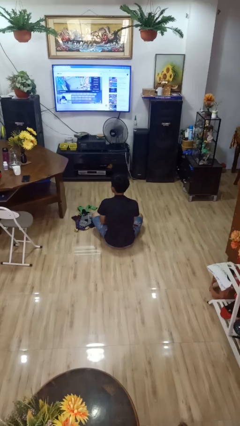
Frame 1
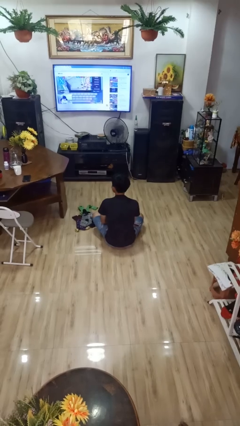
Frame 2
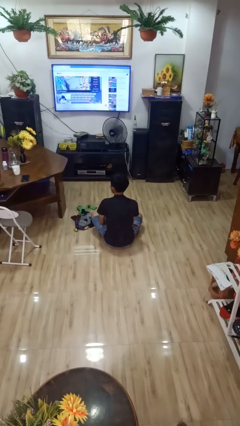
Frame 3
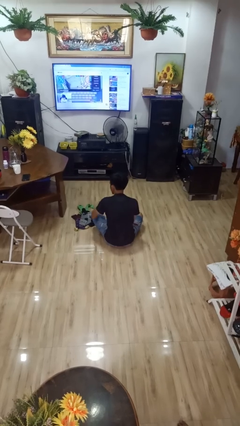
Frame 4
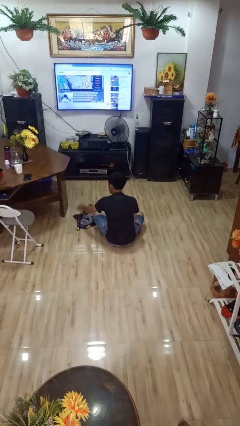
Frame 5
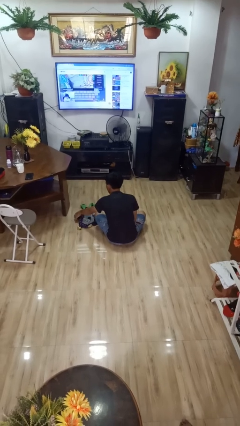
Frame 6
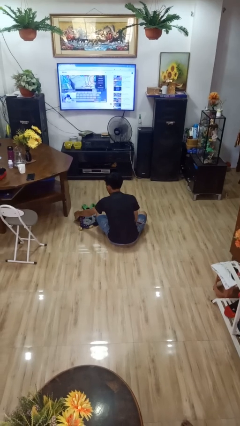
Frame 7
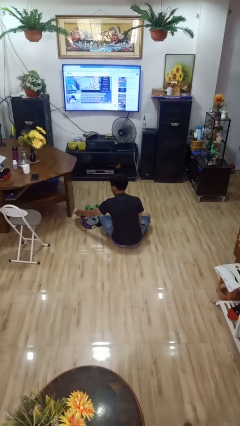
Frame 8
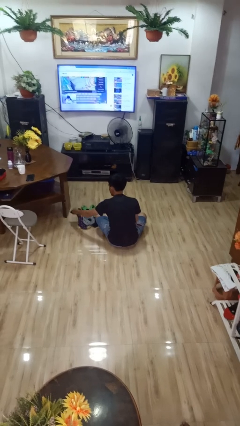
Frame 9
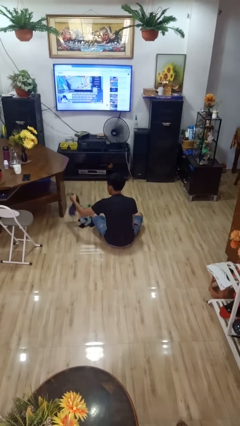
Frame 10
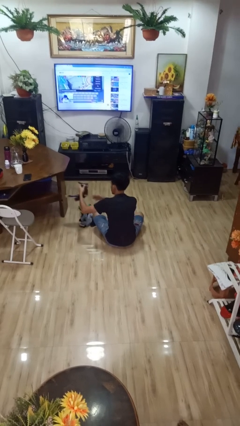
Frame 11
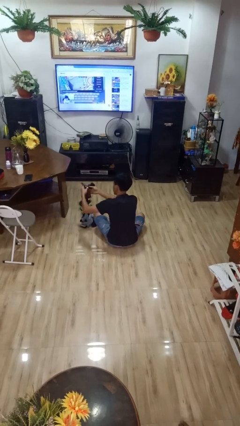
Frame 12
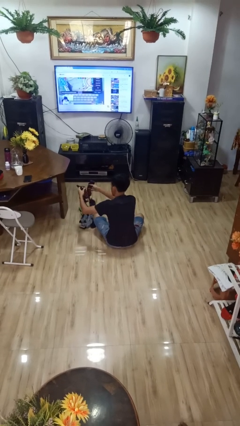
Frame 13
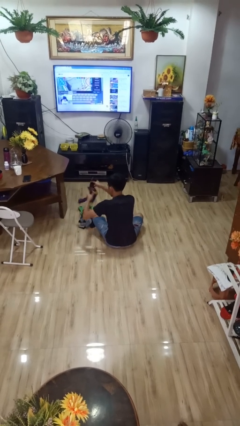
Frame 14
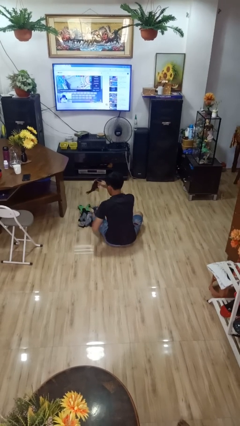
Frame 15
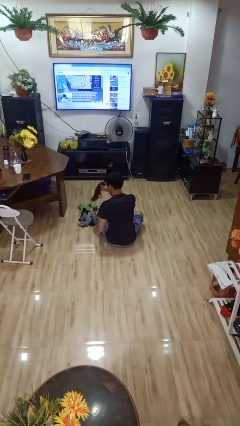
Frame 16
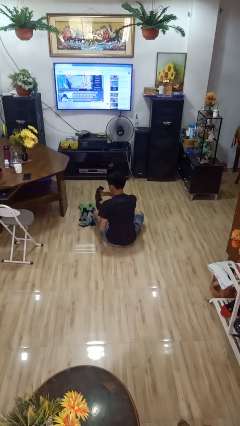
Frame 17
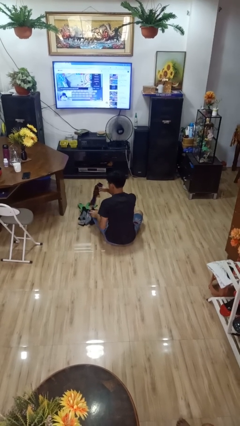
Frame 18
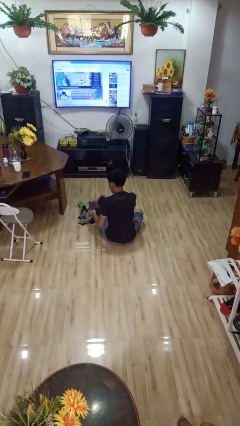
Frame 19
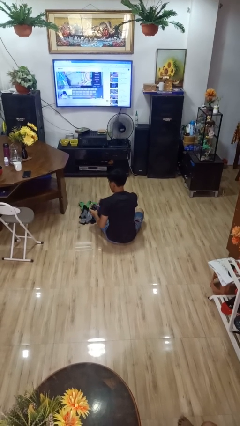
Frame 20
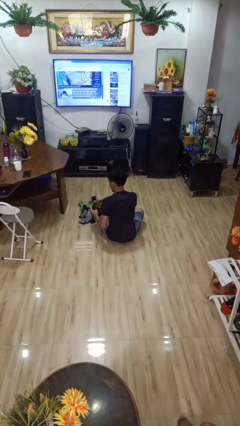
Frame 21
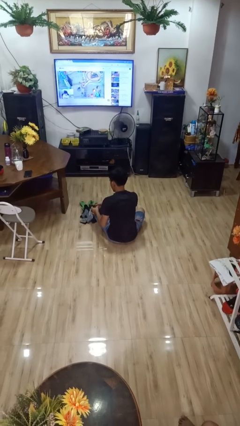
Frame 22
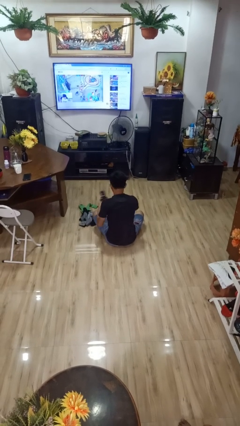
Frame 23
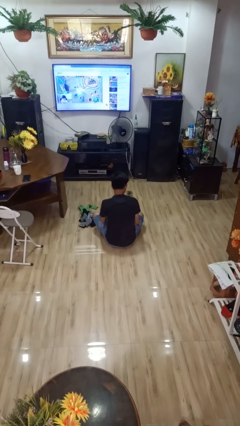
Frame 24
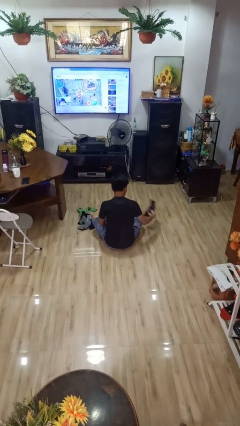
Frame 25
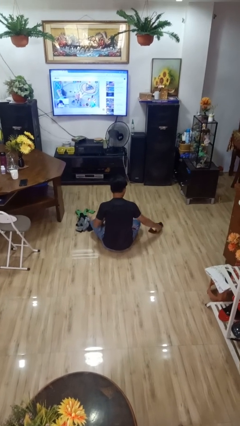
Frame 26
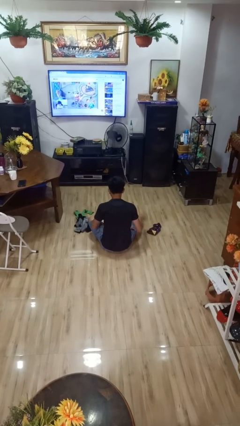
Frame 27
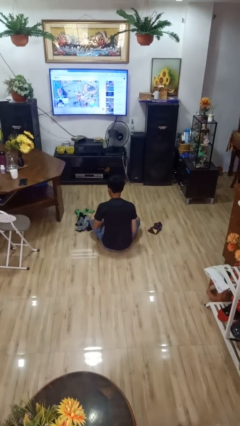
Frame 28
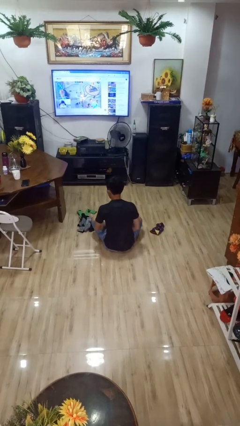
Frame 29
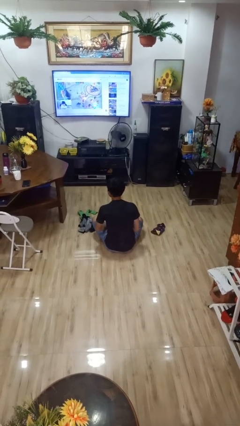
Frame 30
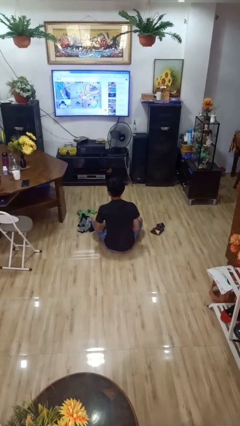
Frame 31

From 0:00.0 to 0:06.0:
person folds socks

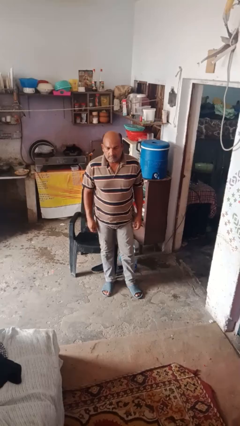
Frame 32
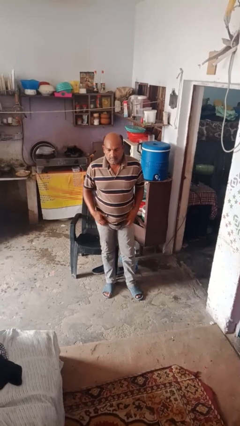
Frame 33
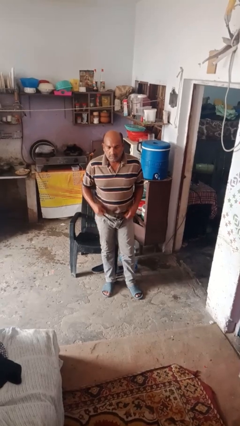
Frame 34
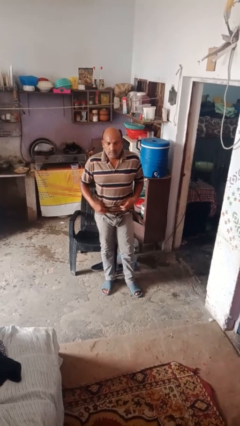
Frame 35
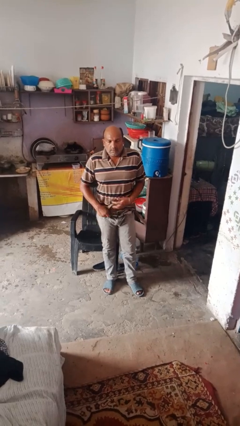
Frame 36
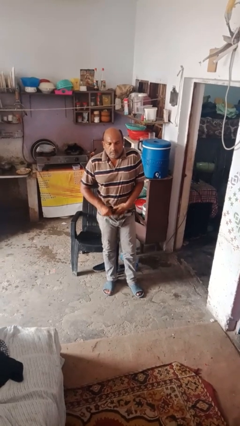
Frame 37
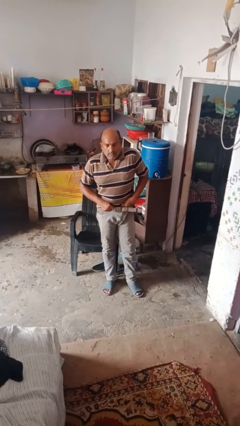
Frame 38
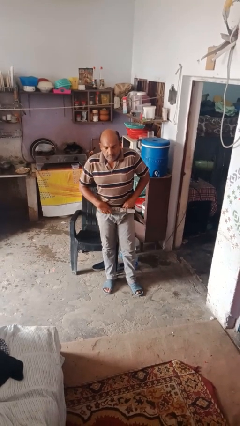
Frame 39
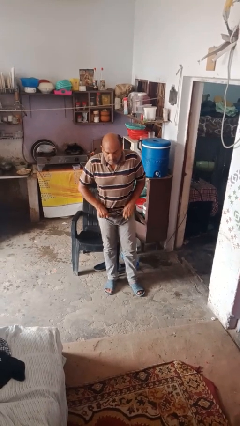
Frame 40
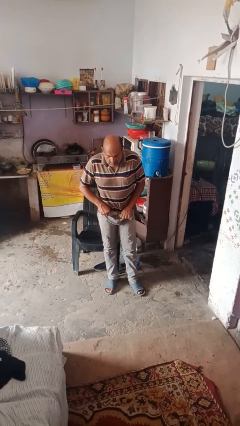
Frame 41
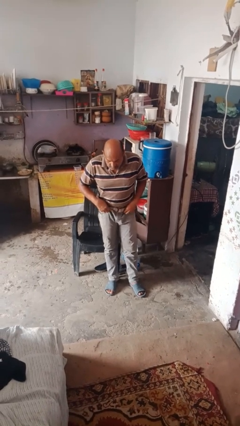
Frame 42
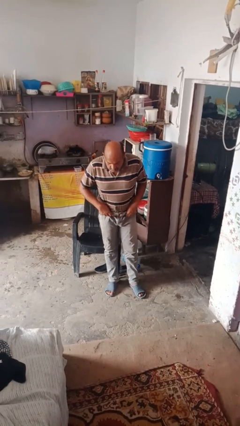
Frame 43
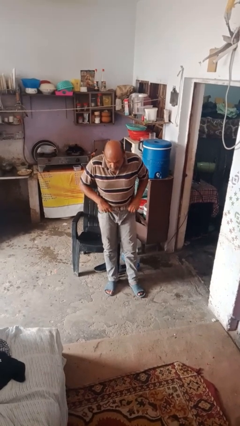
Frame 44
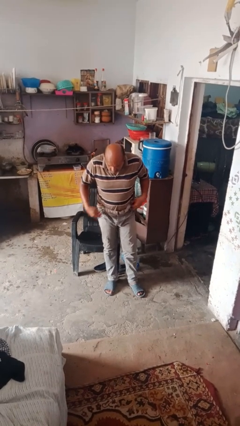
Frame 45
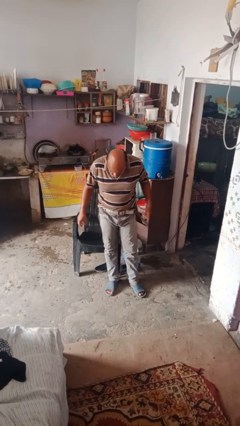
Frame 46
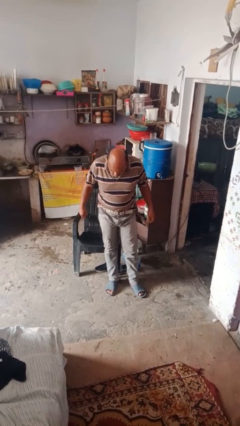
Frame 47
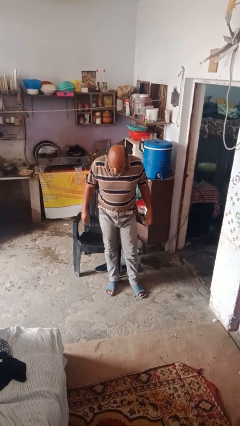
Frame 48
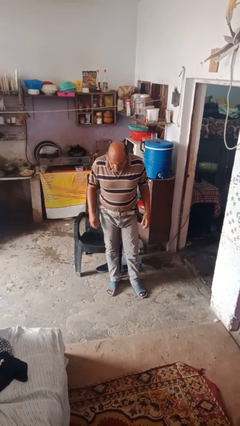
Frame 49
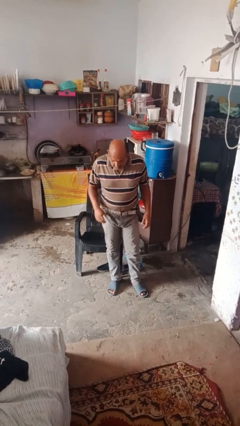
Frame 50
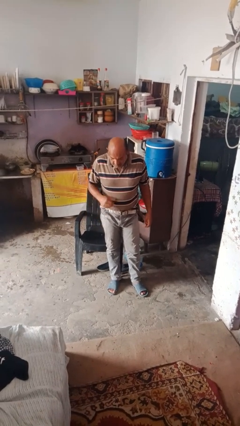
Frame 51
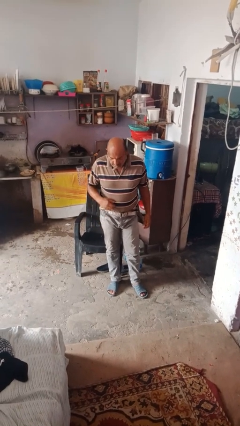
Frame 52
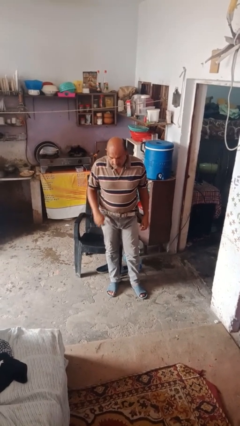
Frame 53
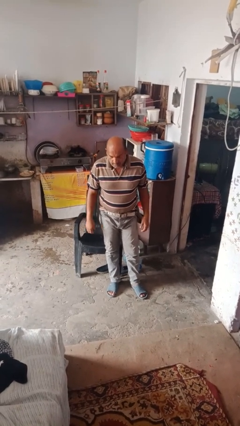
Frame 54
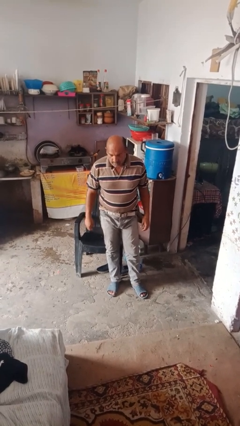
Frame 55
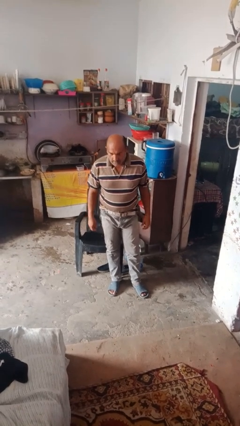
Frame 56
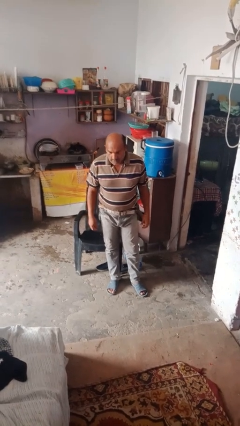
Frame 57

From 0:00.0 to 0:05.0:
person tucks in shirt

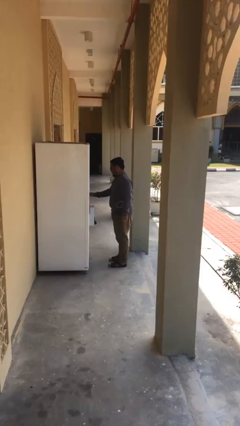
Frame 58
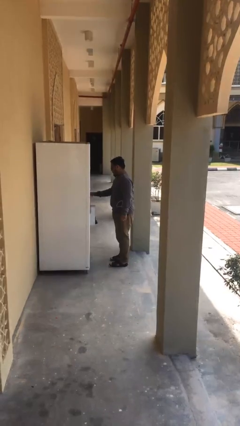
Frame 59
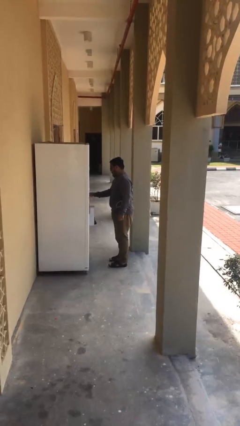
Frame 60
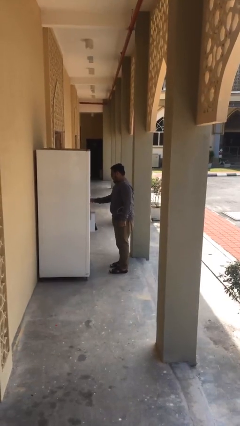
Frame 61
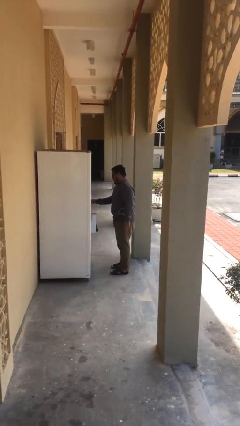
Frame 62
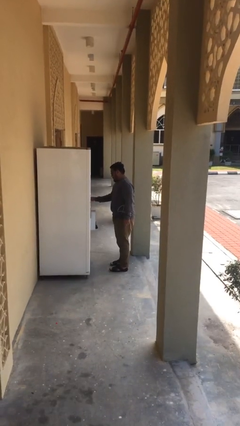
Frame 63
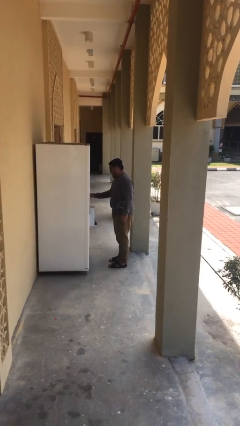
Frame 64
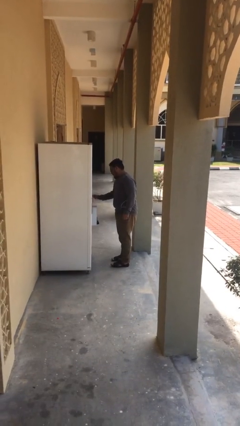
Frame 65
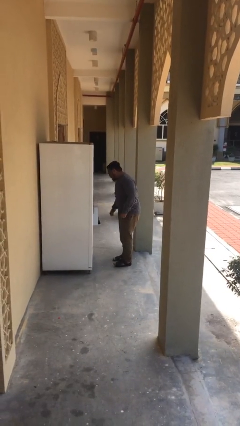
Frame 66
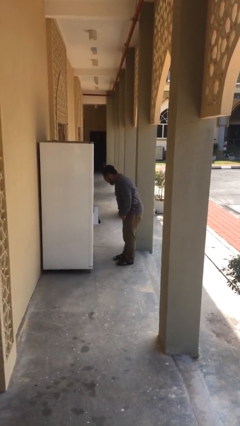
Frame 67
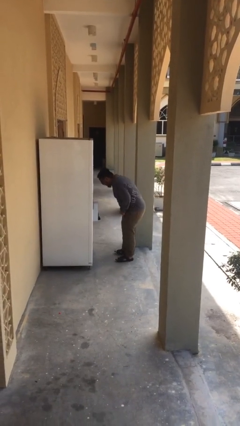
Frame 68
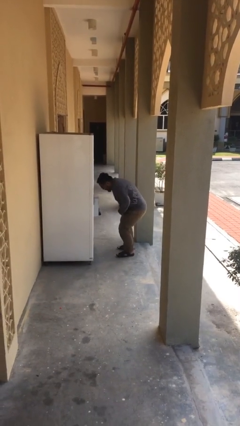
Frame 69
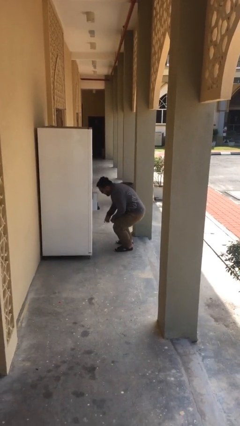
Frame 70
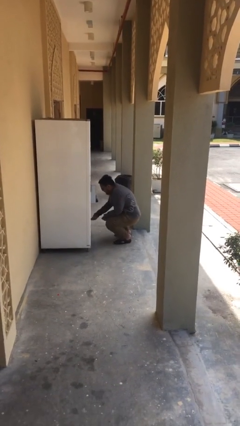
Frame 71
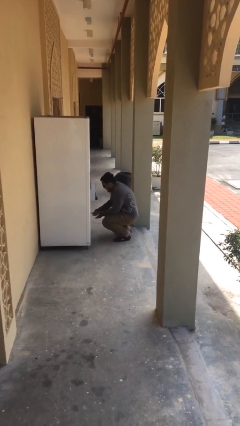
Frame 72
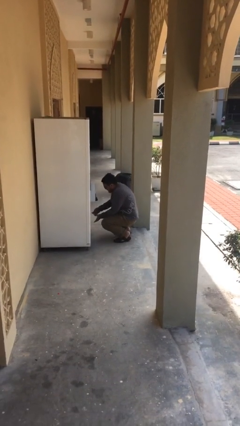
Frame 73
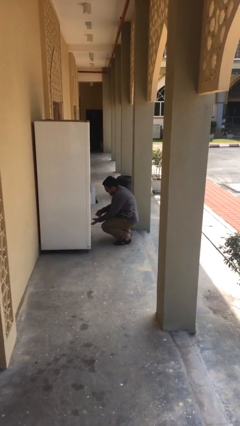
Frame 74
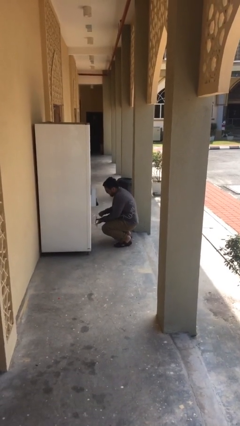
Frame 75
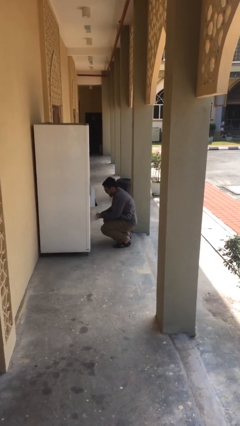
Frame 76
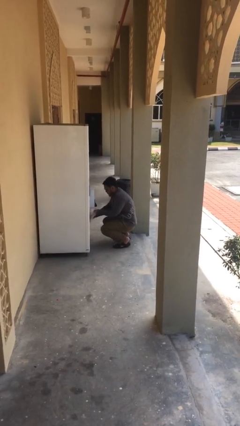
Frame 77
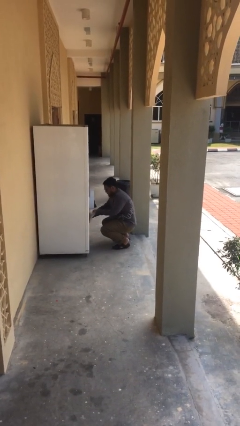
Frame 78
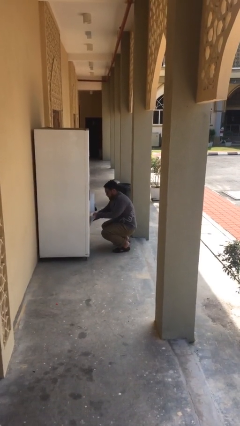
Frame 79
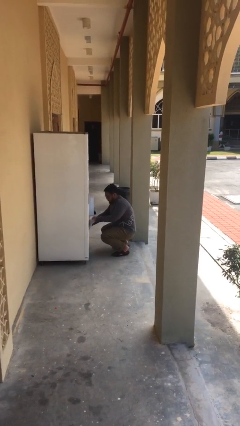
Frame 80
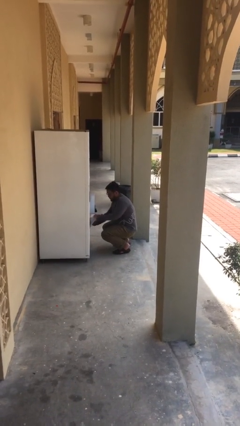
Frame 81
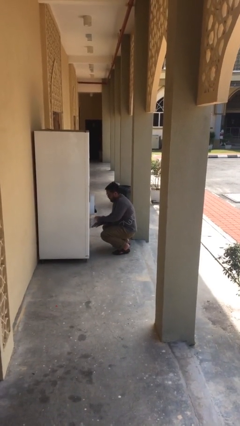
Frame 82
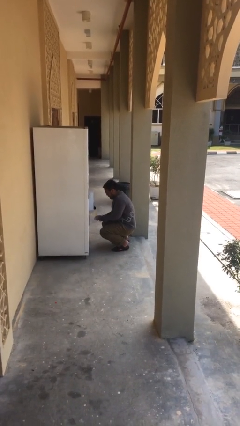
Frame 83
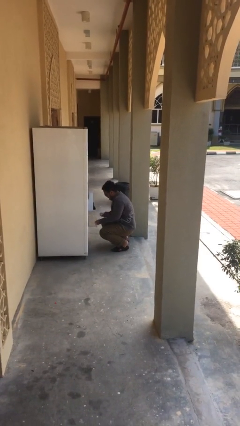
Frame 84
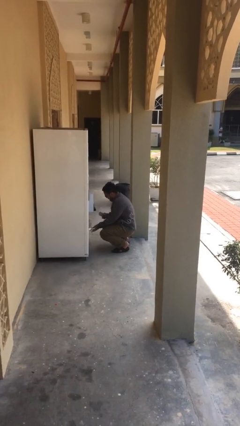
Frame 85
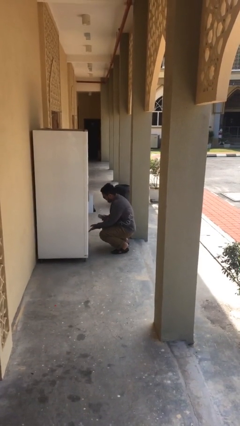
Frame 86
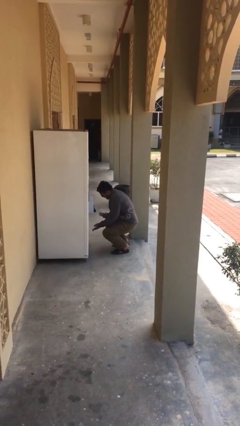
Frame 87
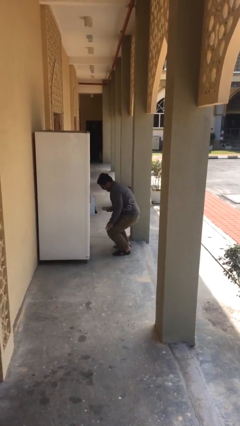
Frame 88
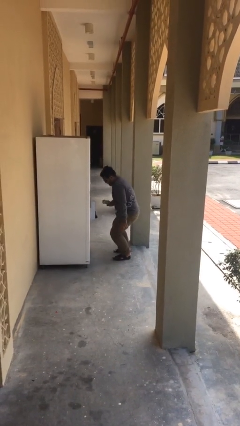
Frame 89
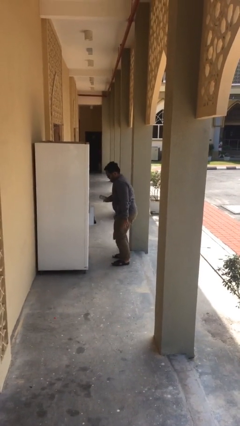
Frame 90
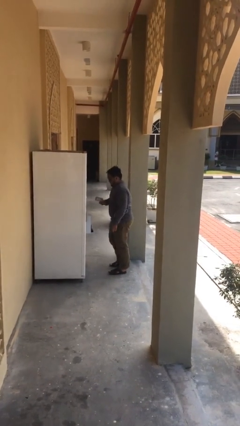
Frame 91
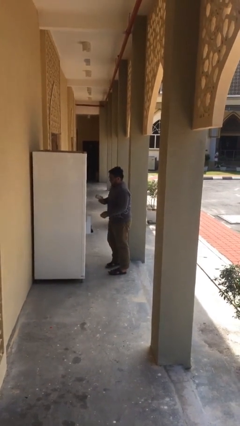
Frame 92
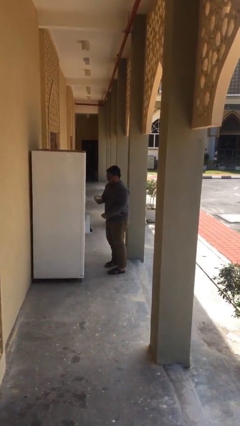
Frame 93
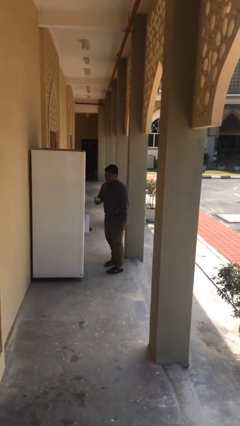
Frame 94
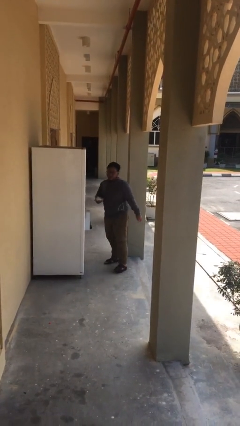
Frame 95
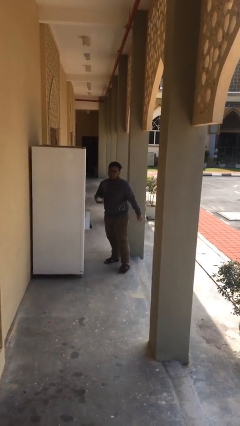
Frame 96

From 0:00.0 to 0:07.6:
person purchases from machine
